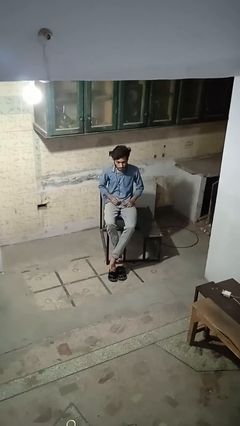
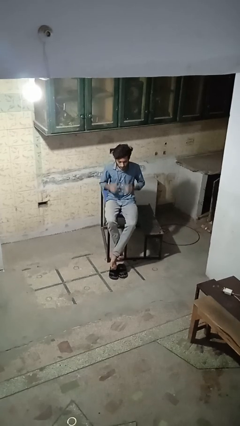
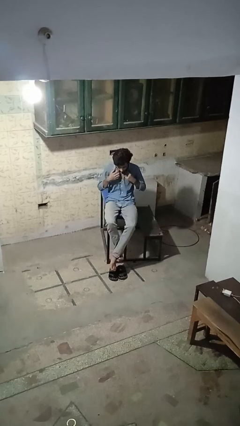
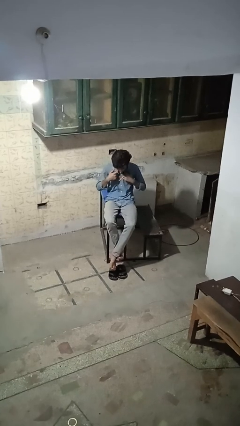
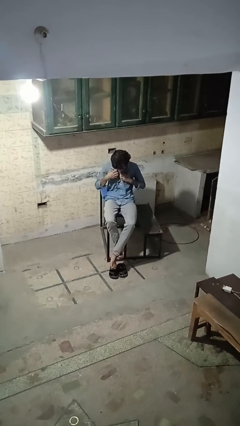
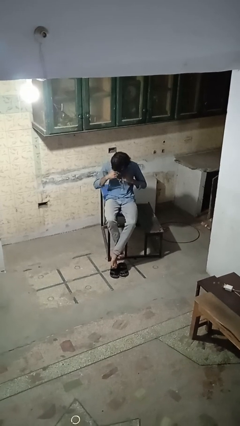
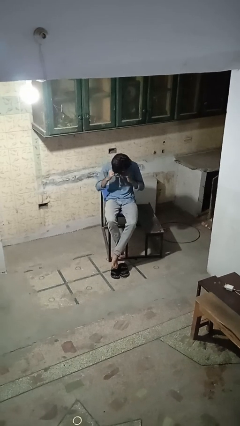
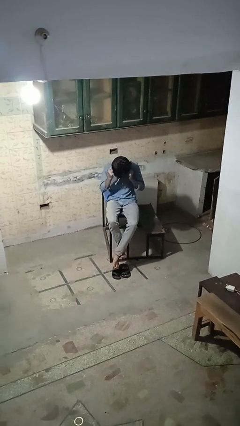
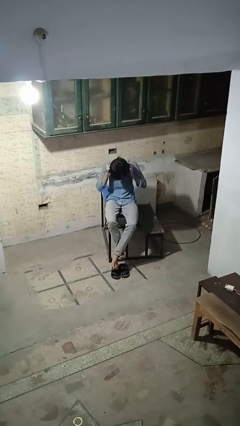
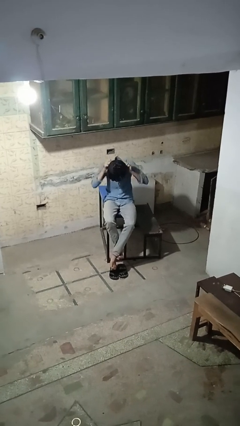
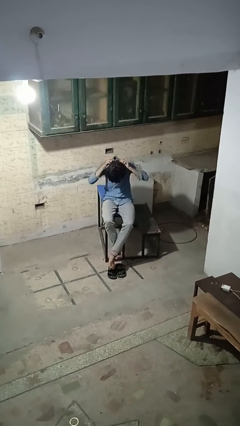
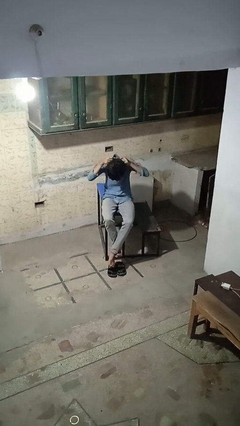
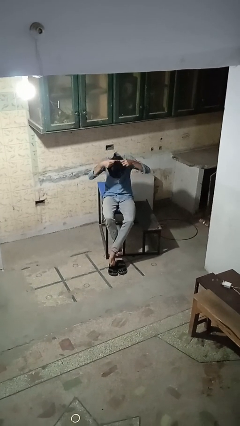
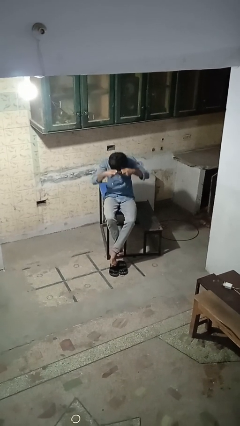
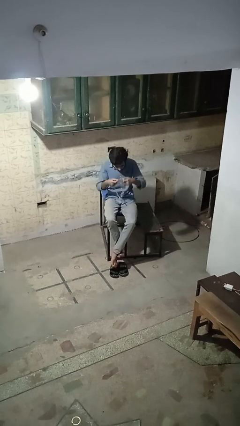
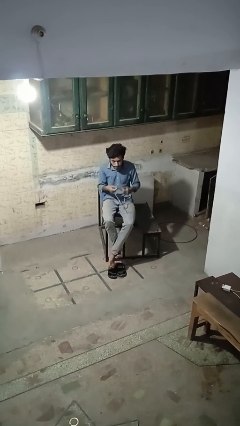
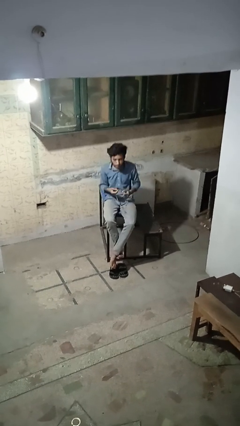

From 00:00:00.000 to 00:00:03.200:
person takes off necklace

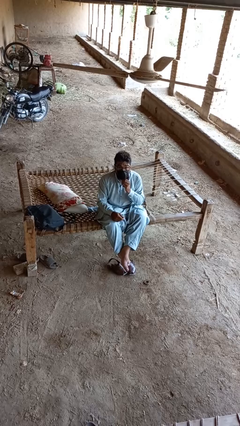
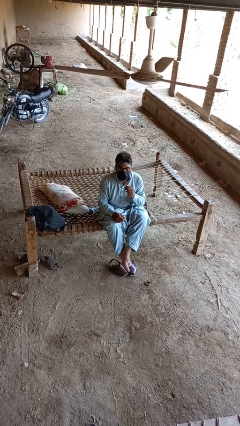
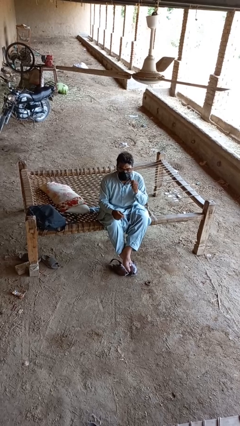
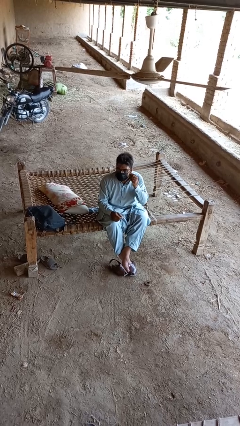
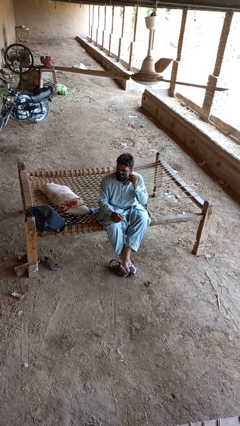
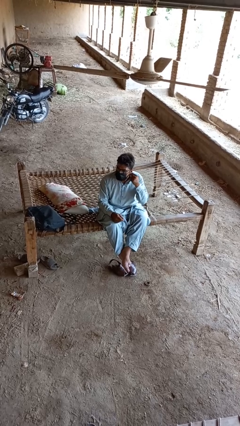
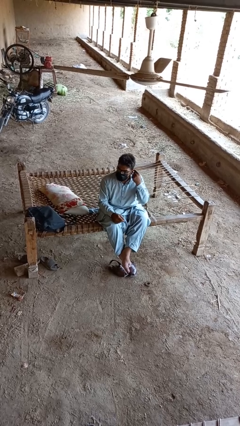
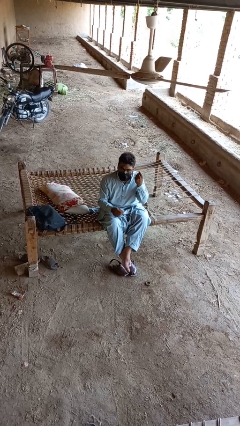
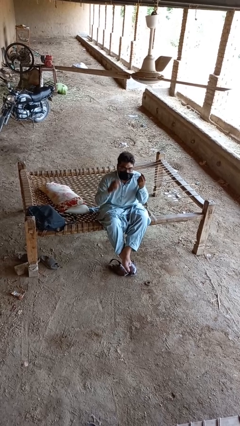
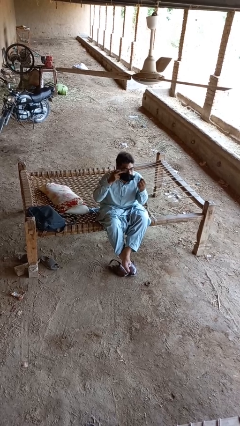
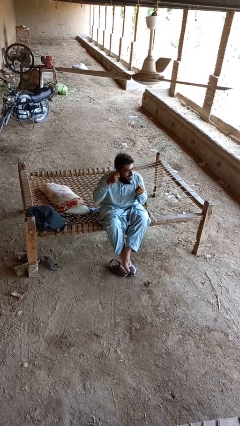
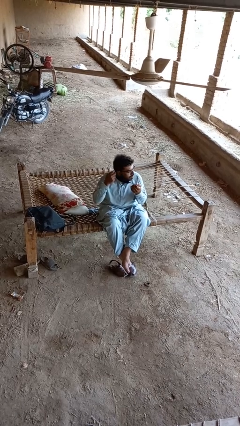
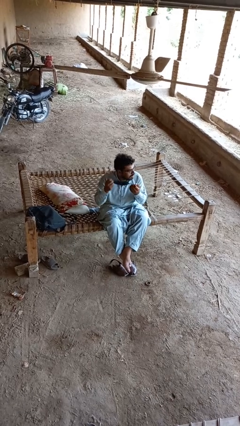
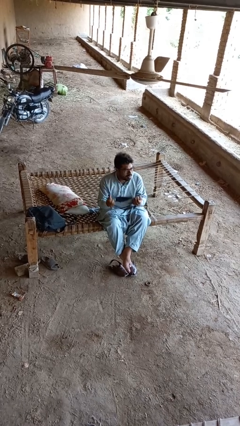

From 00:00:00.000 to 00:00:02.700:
person takes off facemask

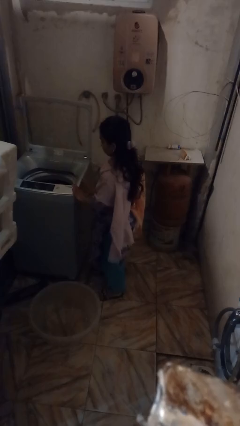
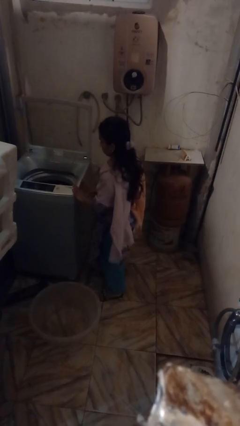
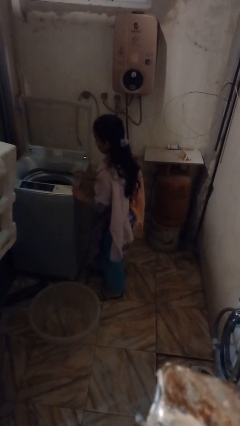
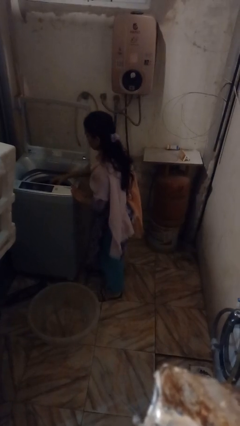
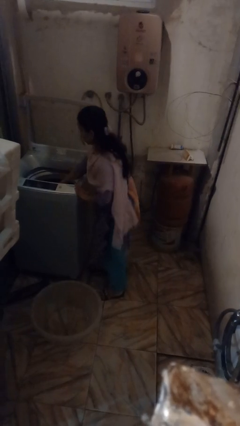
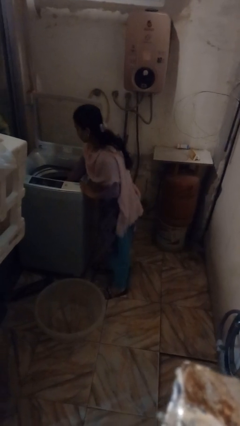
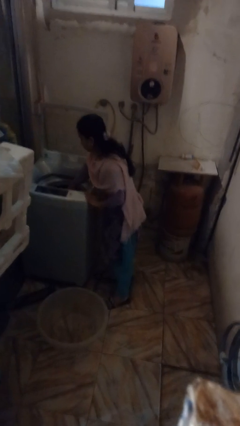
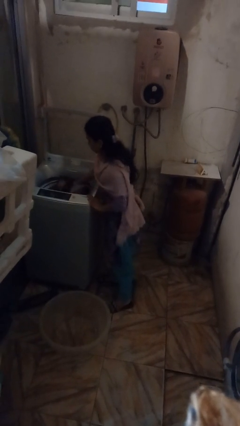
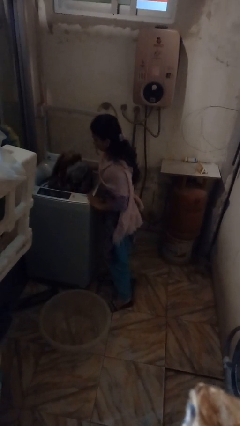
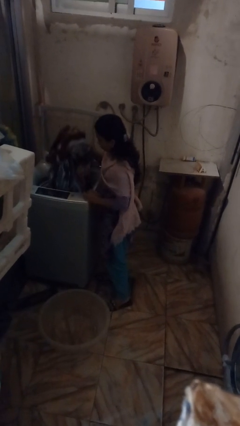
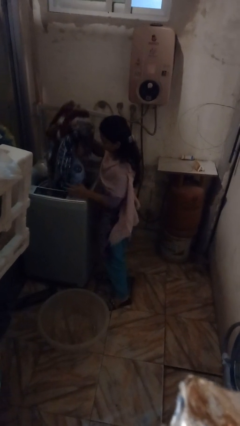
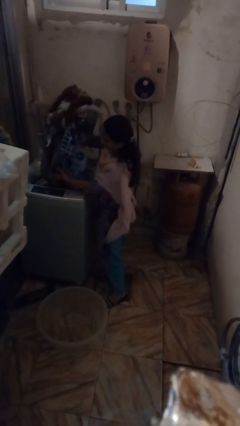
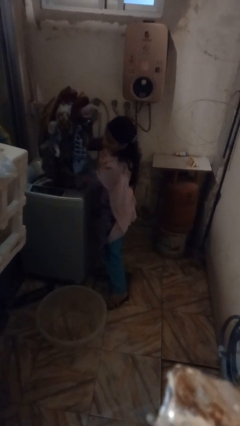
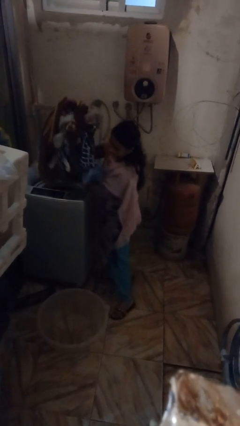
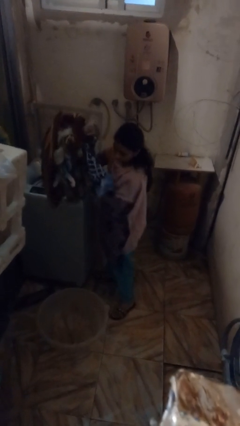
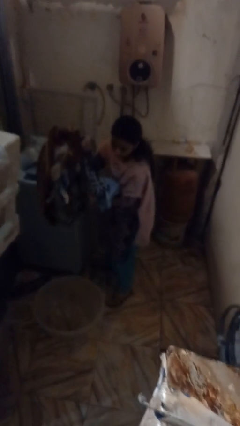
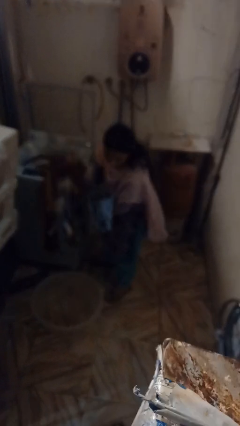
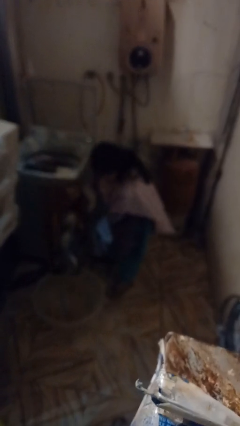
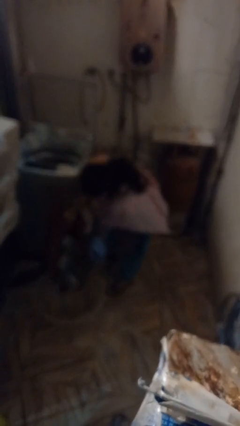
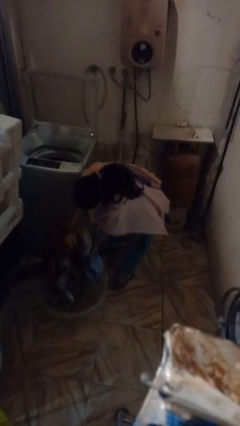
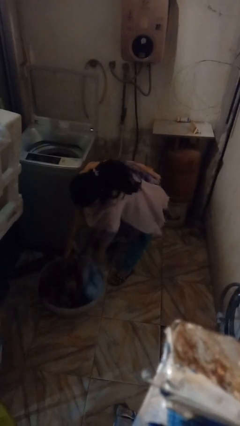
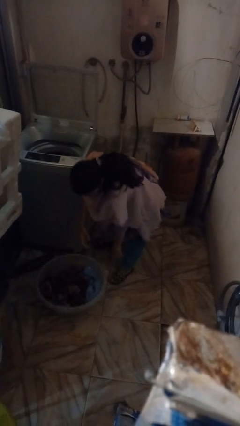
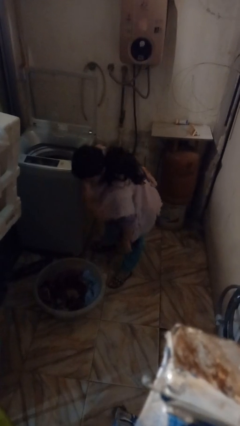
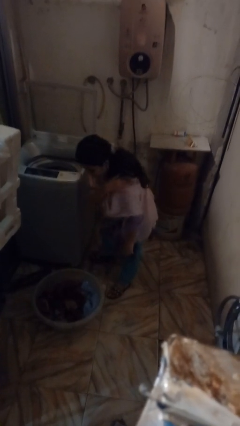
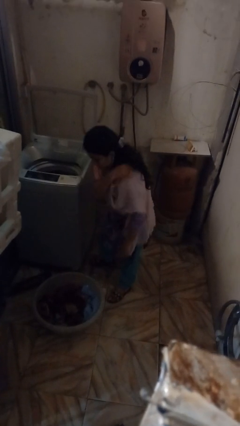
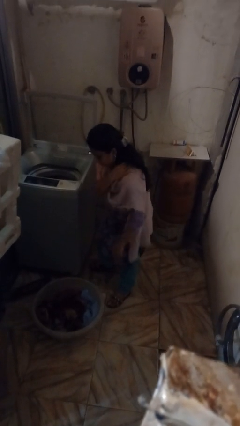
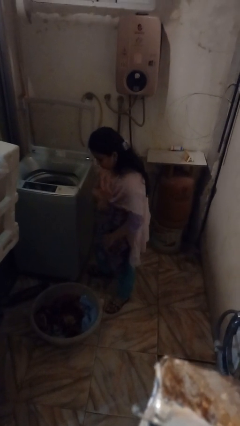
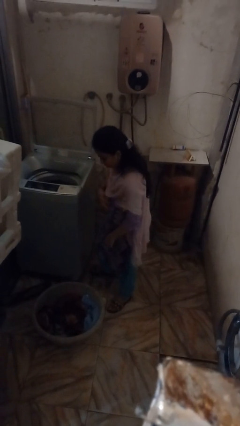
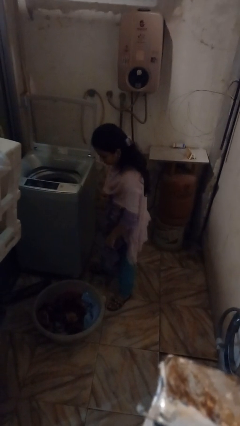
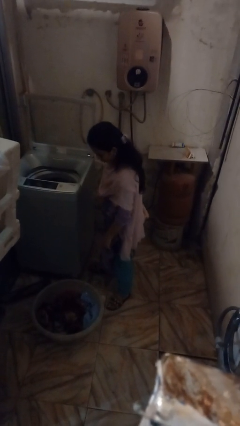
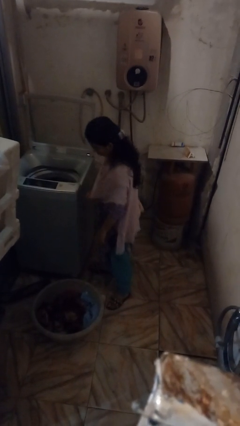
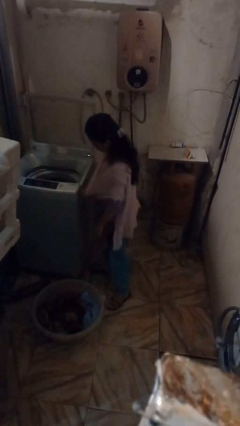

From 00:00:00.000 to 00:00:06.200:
person unloads clotheswasher

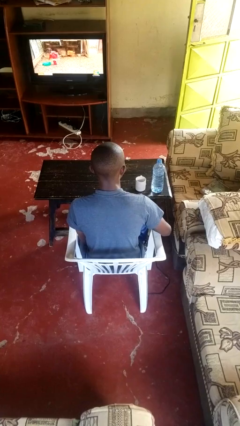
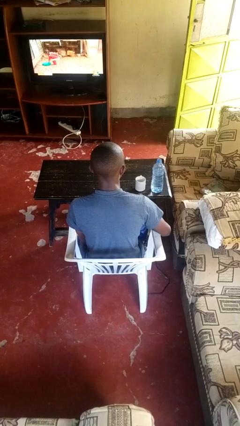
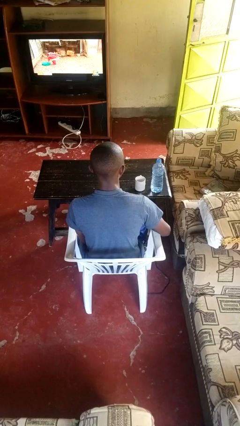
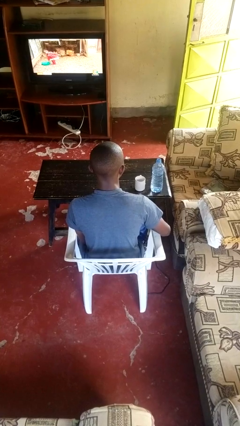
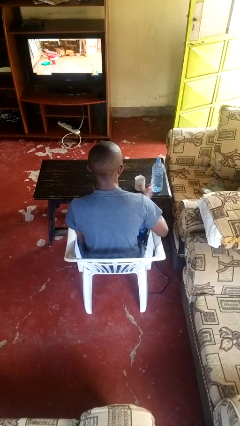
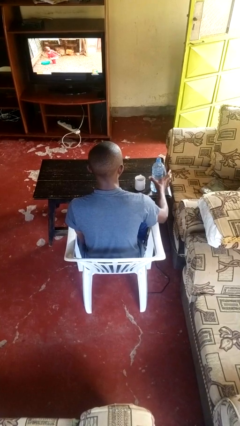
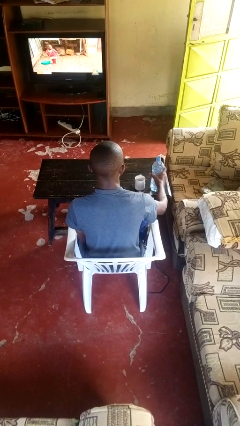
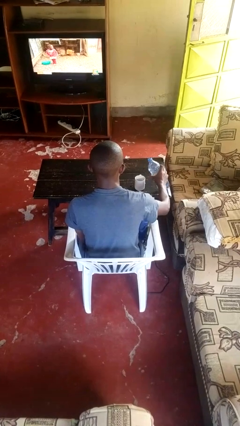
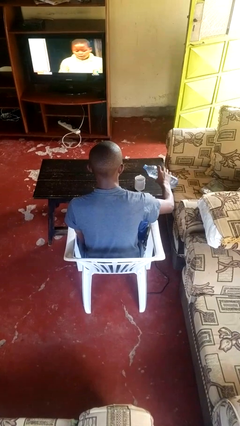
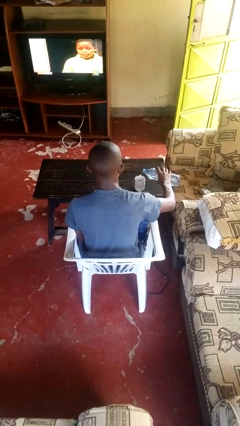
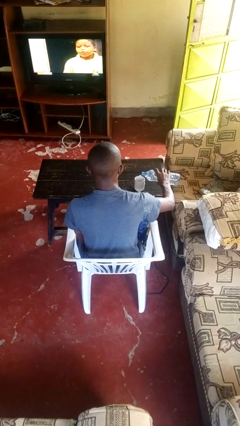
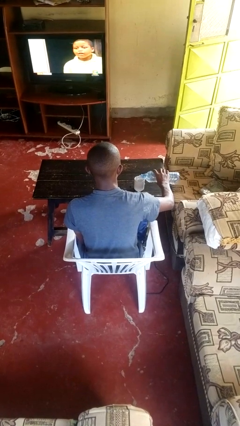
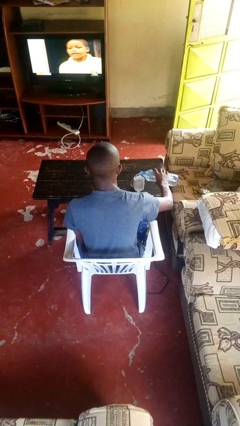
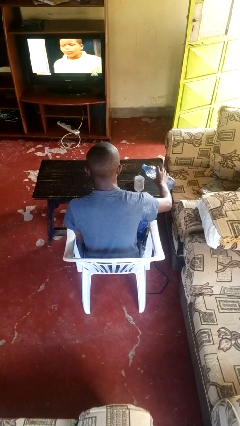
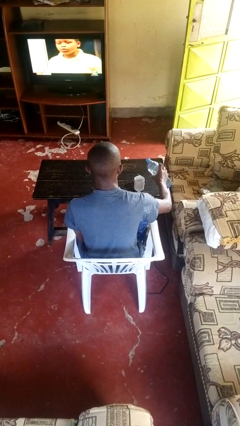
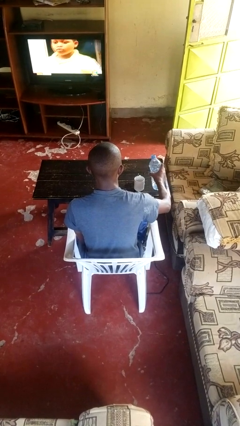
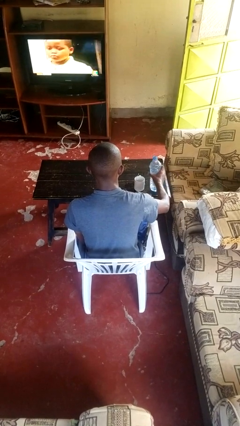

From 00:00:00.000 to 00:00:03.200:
person pours liquid into cup

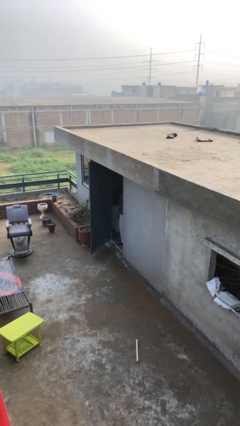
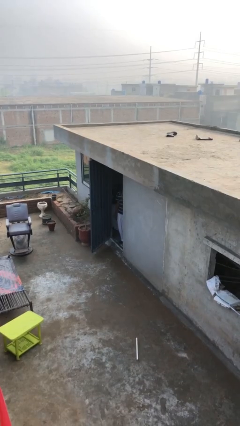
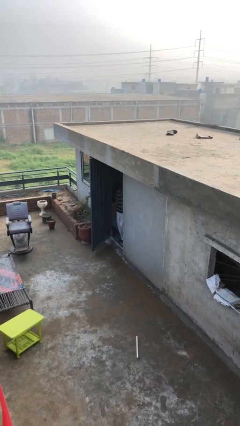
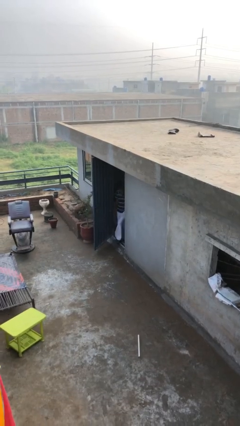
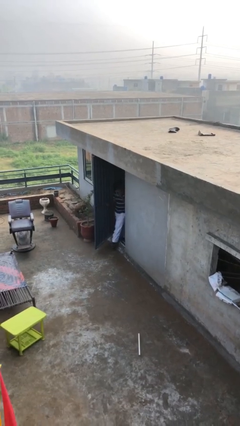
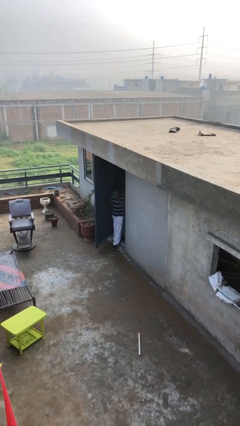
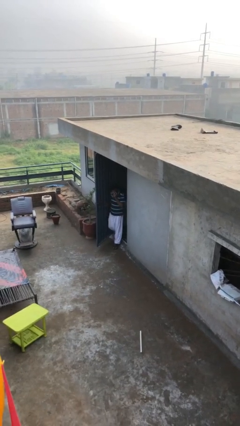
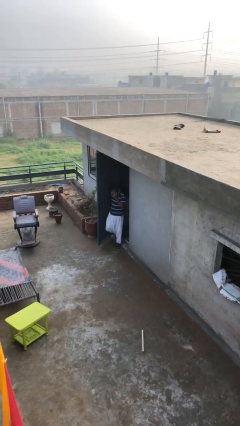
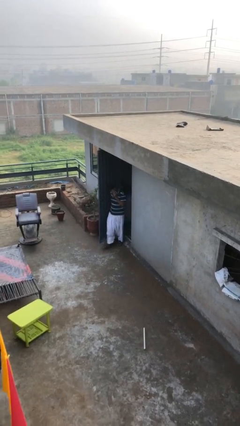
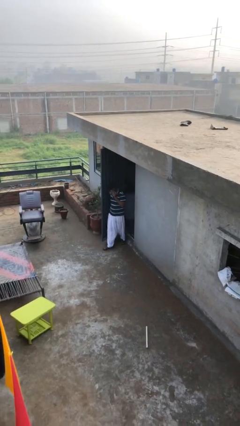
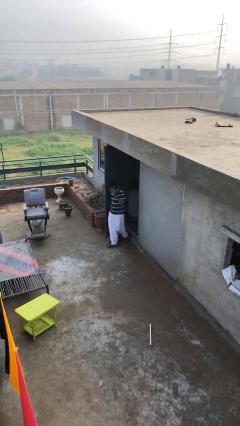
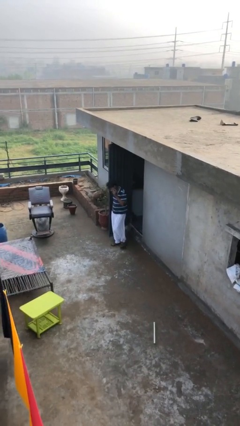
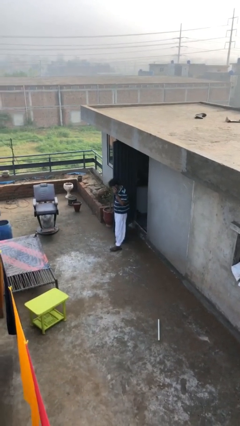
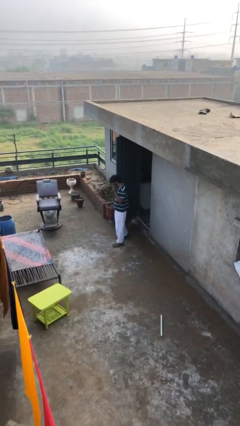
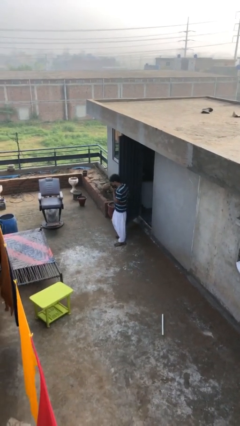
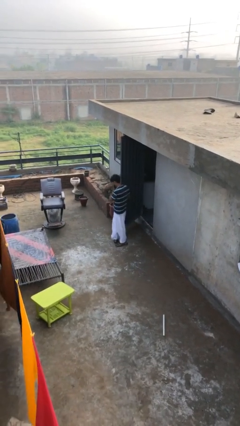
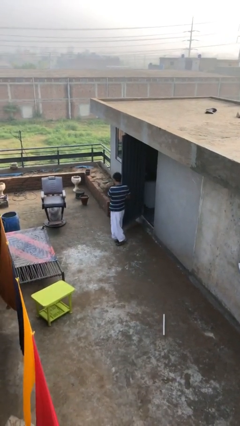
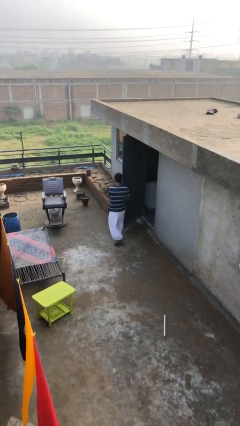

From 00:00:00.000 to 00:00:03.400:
person enters scene through structure
